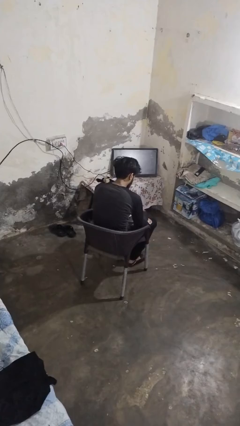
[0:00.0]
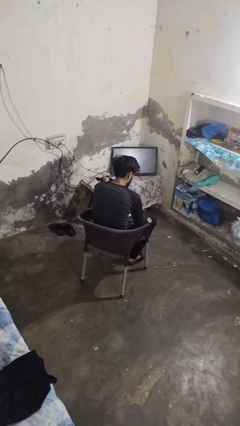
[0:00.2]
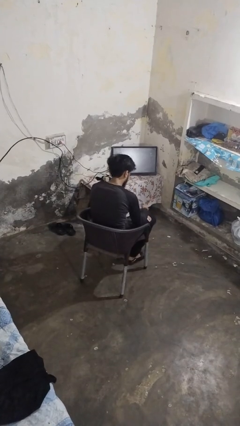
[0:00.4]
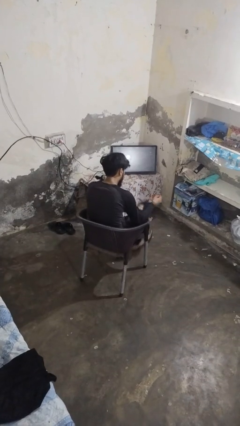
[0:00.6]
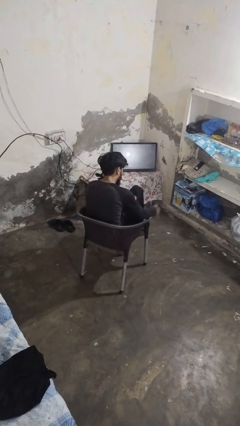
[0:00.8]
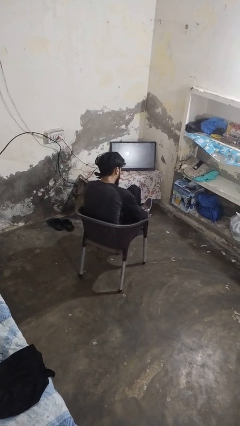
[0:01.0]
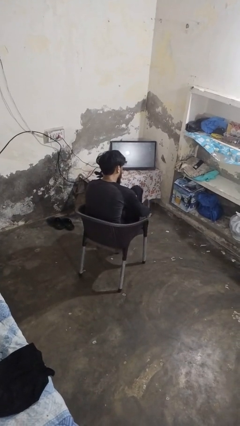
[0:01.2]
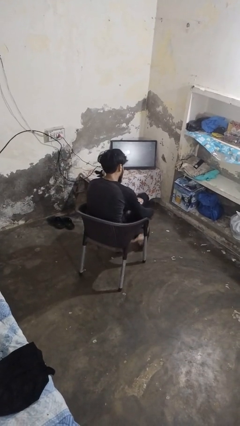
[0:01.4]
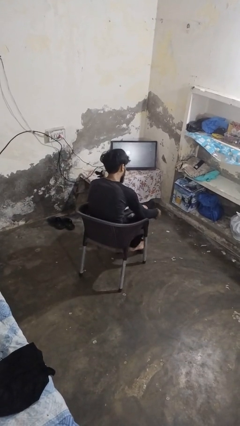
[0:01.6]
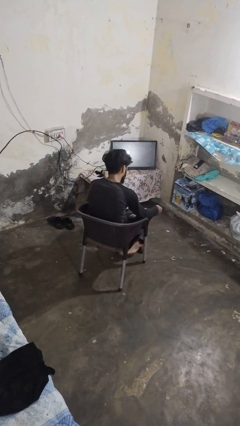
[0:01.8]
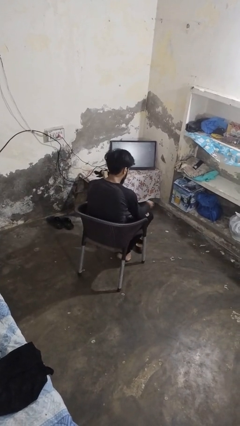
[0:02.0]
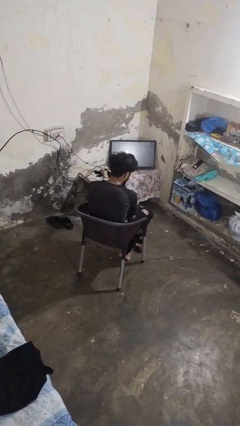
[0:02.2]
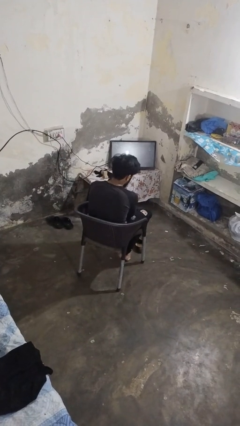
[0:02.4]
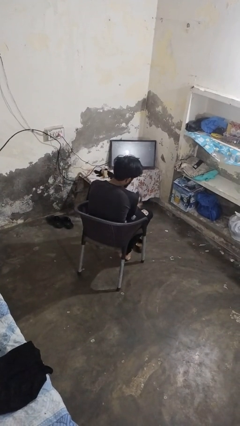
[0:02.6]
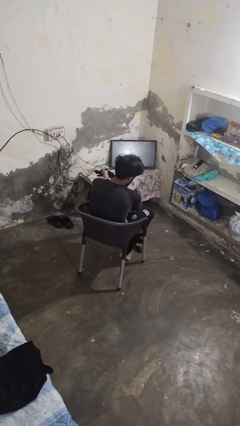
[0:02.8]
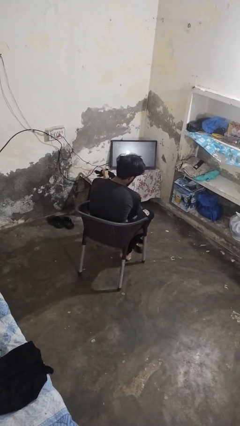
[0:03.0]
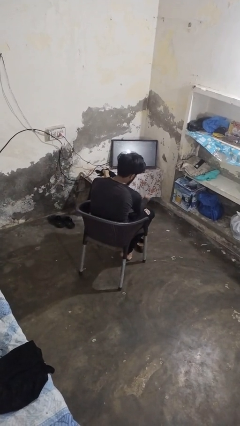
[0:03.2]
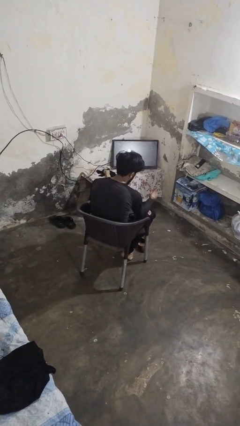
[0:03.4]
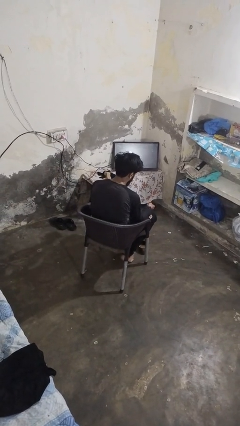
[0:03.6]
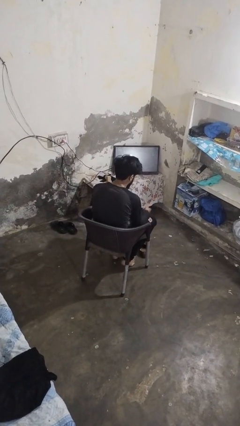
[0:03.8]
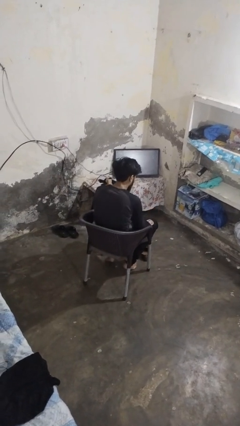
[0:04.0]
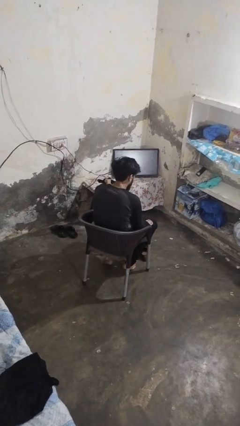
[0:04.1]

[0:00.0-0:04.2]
person takes off shoes

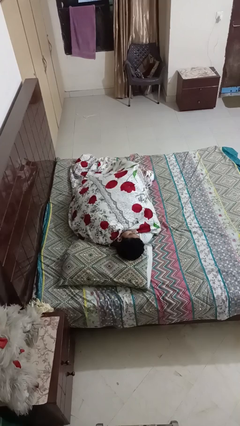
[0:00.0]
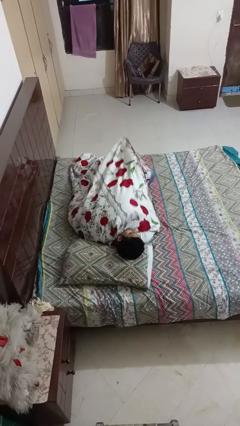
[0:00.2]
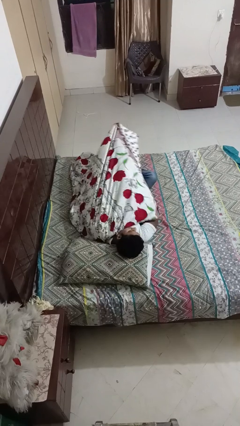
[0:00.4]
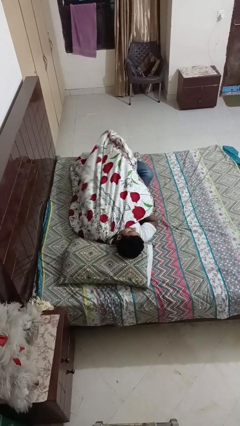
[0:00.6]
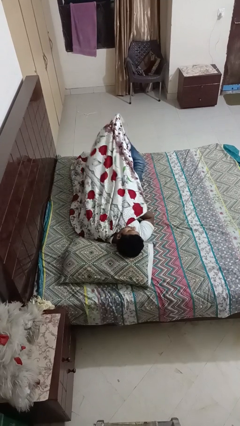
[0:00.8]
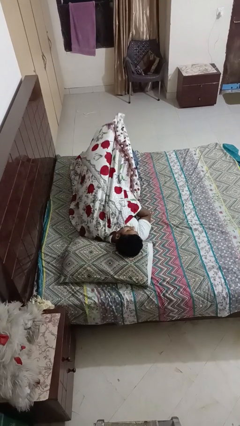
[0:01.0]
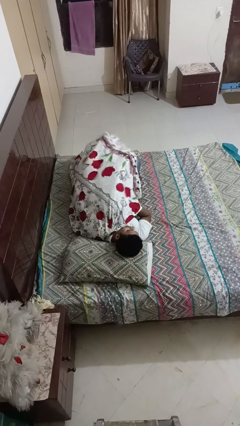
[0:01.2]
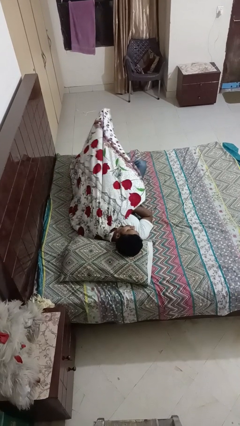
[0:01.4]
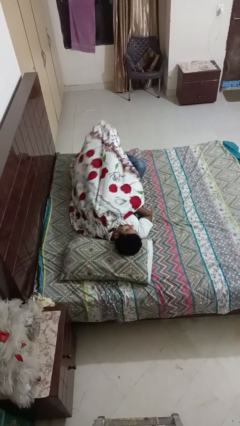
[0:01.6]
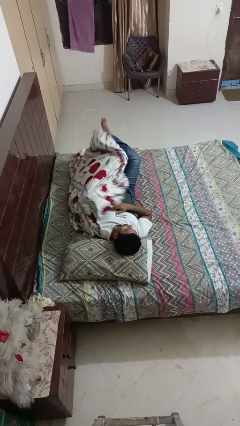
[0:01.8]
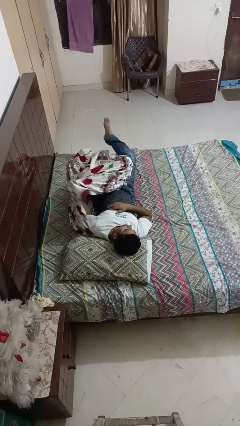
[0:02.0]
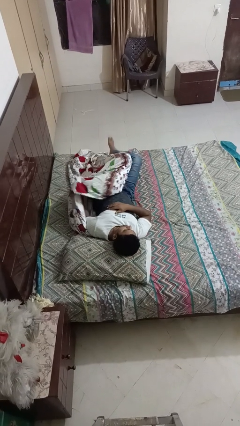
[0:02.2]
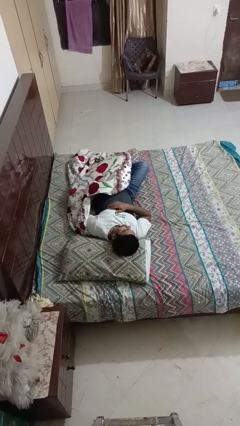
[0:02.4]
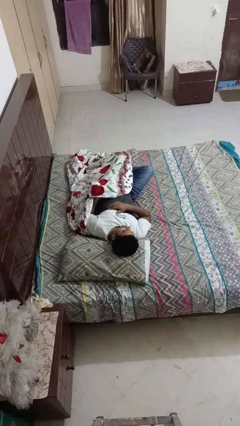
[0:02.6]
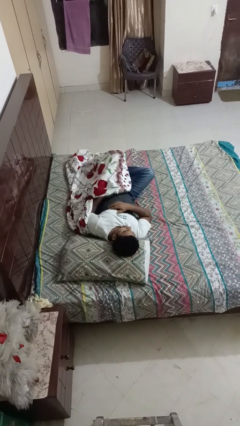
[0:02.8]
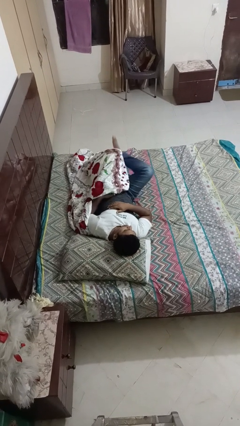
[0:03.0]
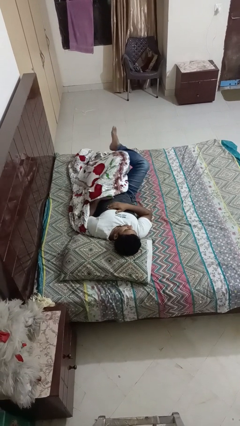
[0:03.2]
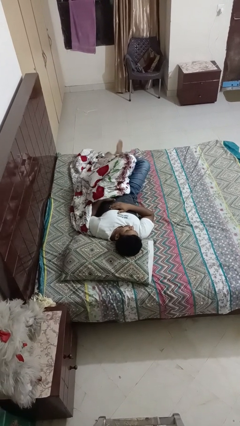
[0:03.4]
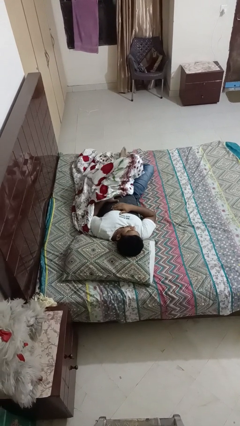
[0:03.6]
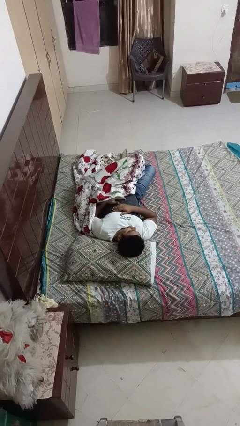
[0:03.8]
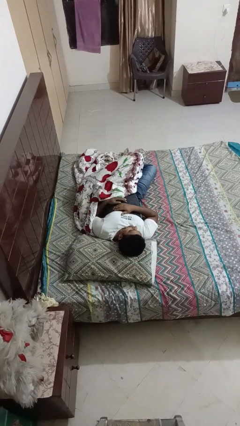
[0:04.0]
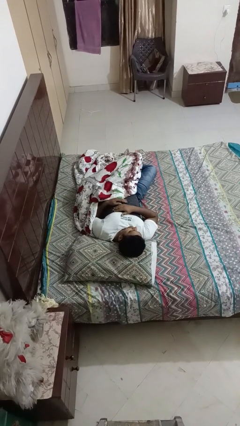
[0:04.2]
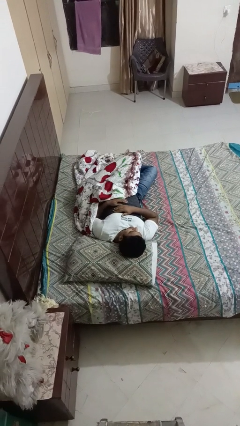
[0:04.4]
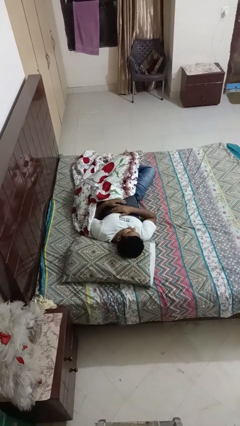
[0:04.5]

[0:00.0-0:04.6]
person uncovers with bedsheets

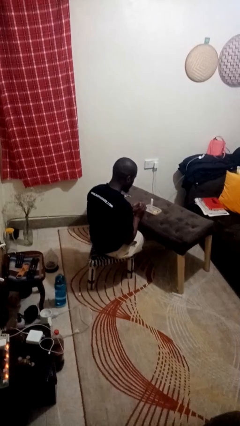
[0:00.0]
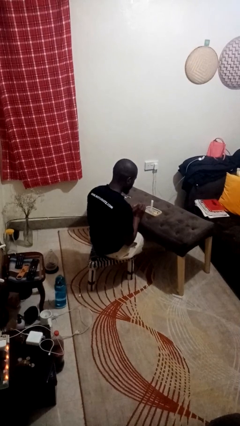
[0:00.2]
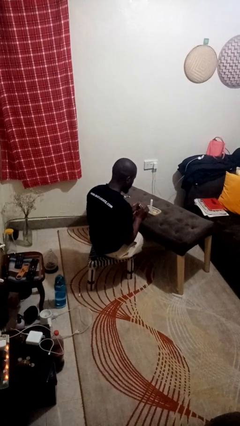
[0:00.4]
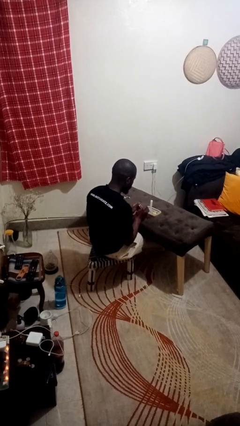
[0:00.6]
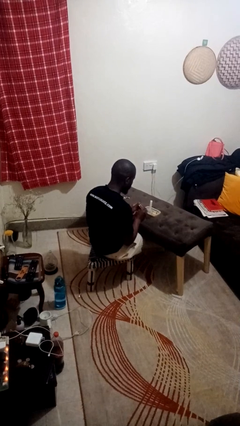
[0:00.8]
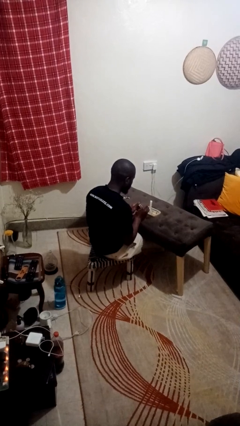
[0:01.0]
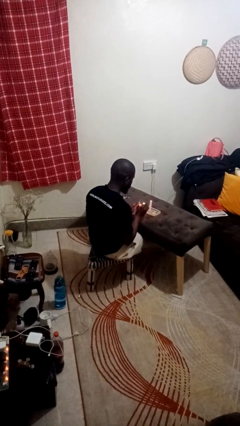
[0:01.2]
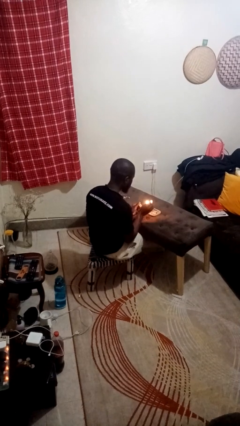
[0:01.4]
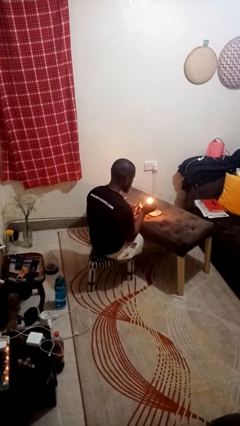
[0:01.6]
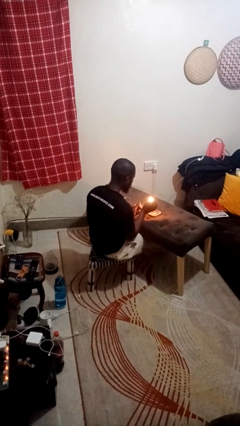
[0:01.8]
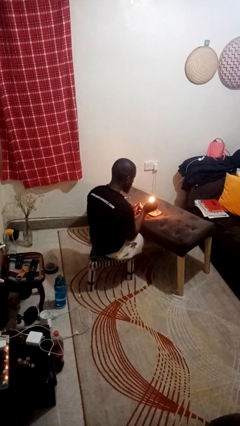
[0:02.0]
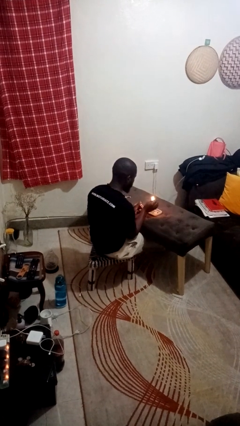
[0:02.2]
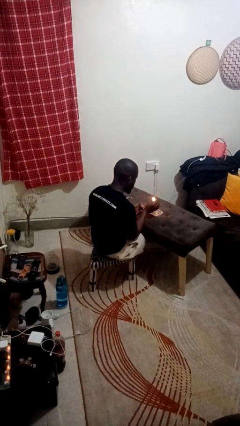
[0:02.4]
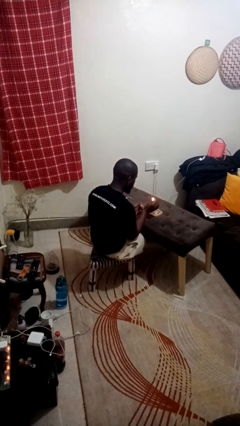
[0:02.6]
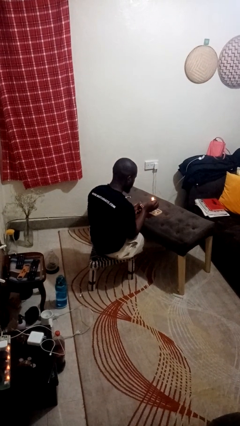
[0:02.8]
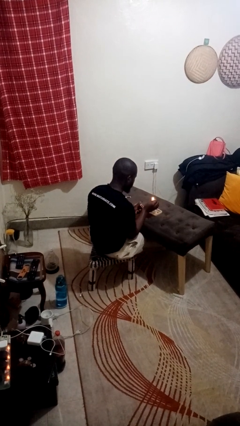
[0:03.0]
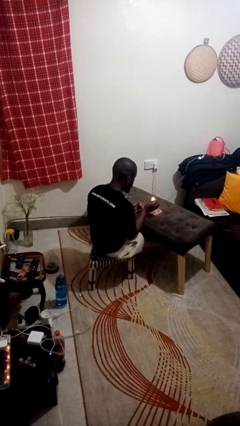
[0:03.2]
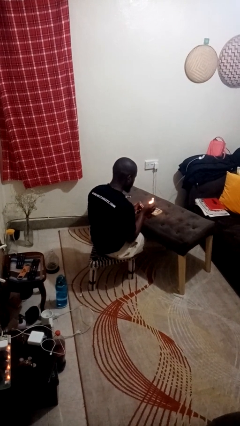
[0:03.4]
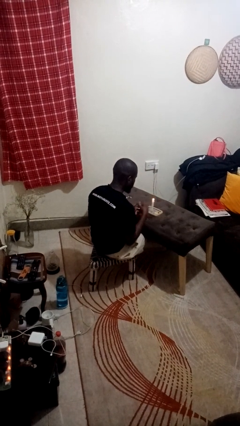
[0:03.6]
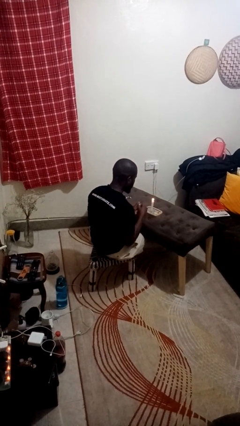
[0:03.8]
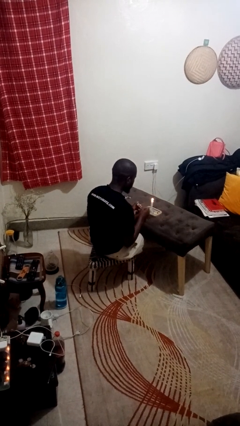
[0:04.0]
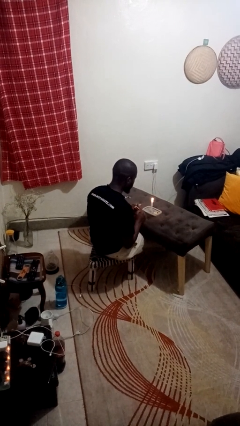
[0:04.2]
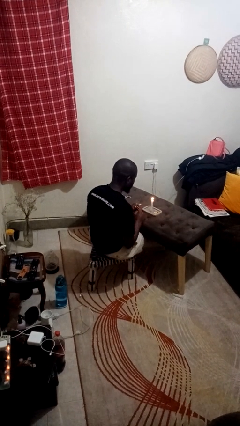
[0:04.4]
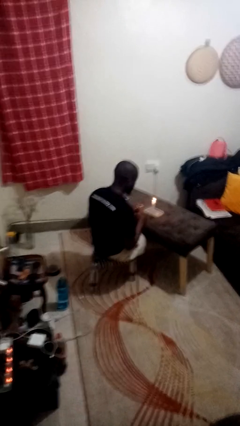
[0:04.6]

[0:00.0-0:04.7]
person lights candle

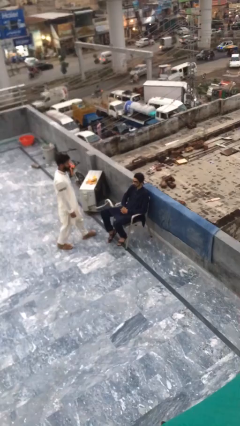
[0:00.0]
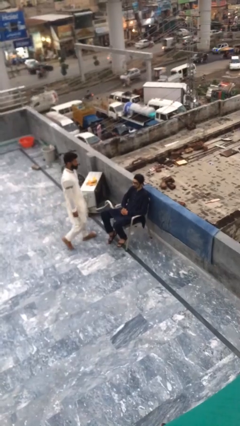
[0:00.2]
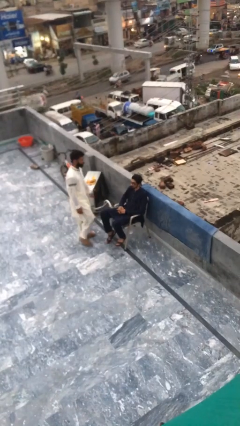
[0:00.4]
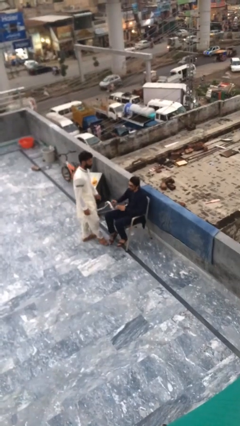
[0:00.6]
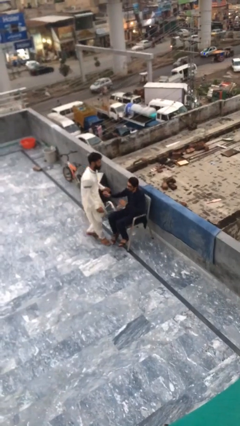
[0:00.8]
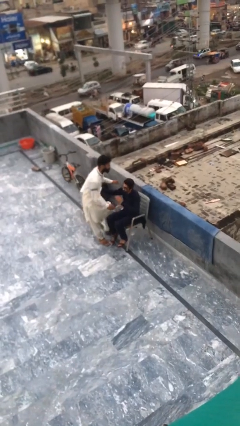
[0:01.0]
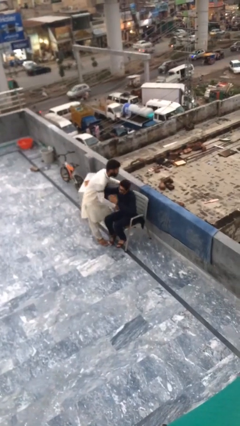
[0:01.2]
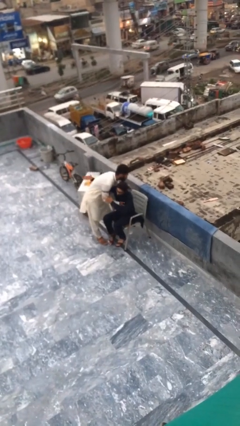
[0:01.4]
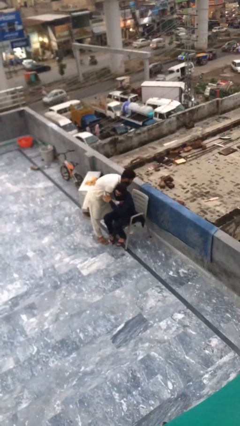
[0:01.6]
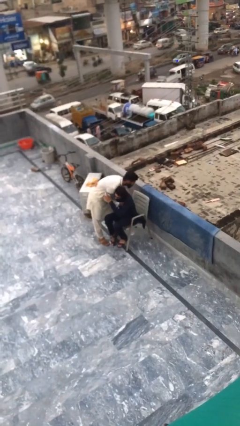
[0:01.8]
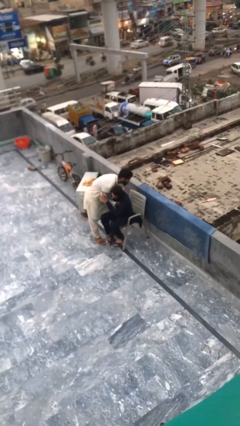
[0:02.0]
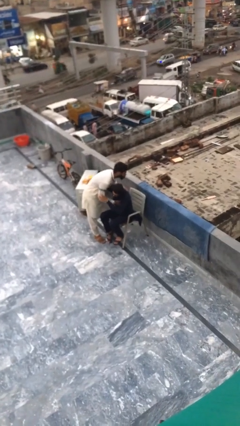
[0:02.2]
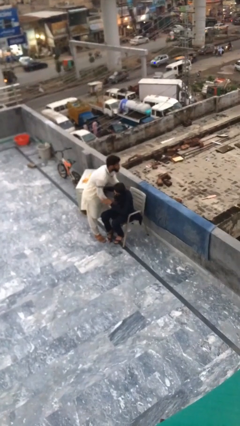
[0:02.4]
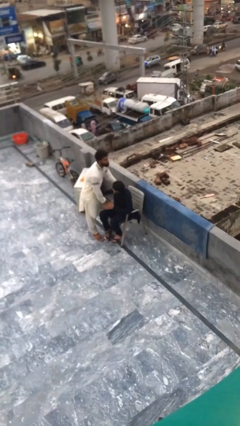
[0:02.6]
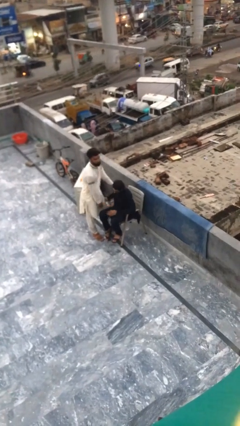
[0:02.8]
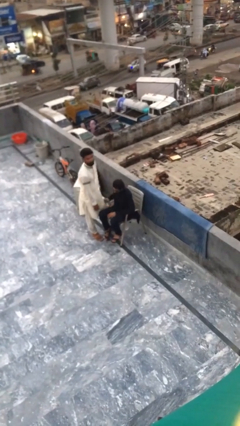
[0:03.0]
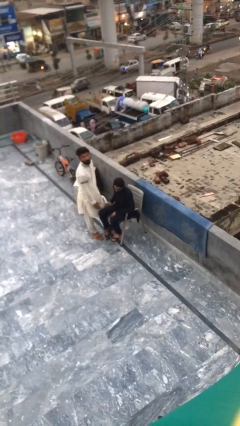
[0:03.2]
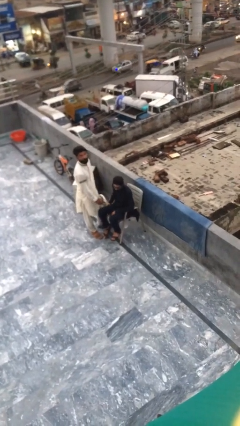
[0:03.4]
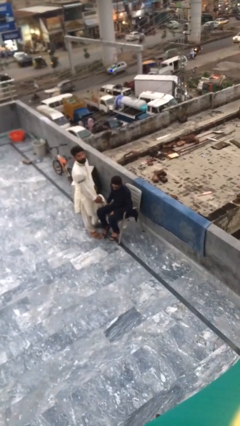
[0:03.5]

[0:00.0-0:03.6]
person embraces person

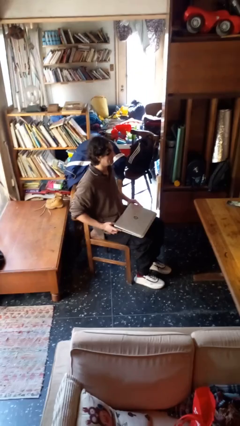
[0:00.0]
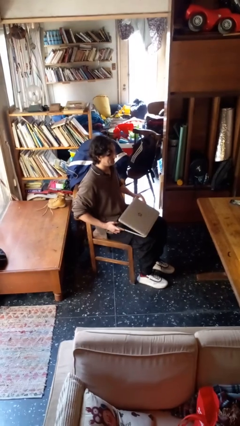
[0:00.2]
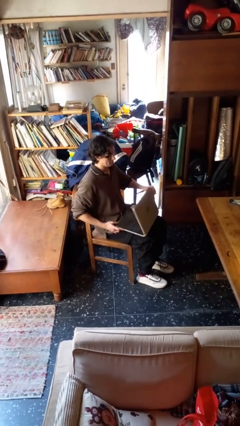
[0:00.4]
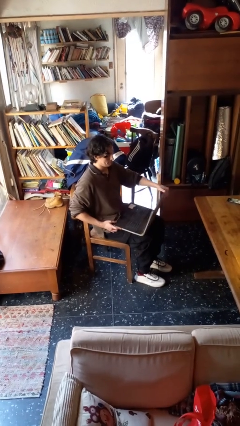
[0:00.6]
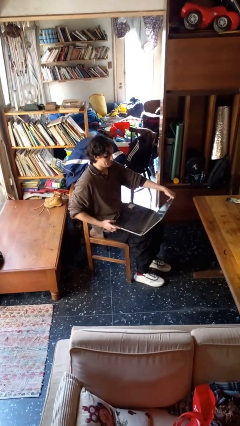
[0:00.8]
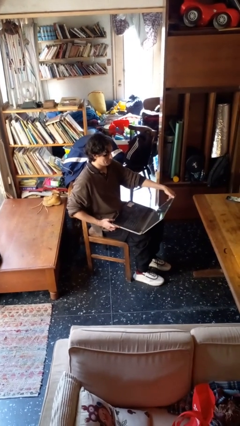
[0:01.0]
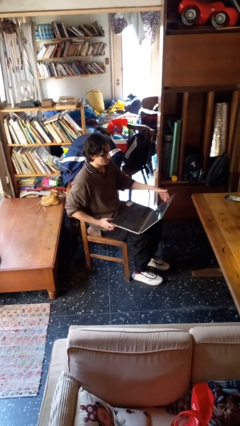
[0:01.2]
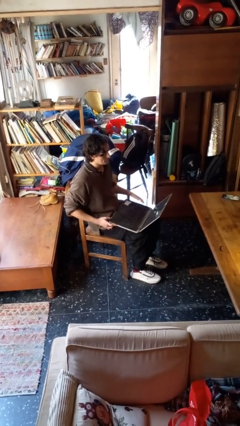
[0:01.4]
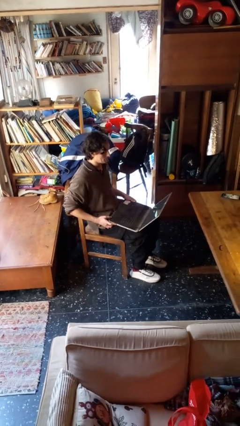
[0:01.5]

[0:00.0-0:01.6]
person opens laptop
